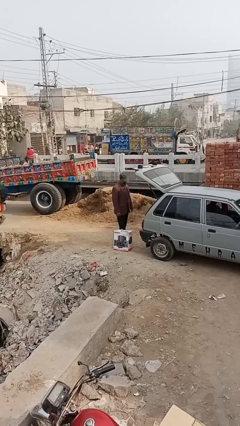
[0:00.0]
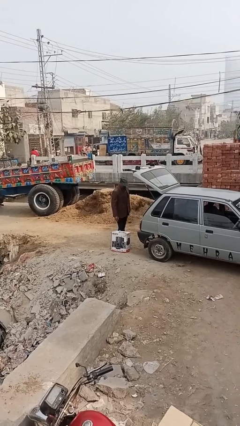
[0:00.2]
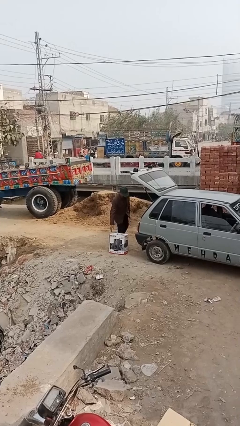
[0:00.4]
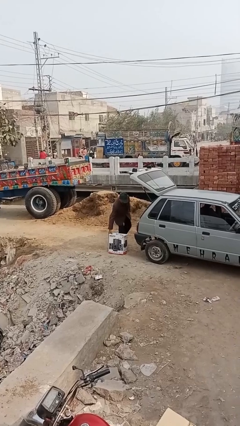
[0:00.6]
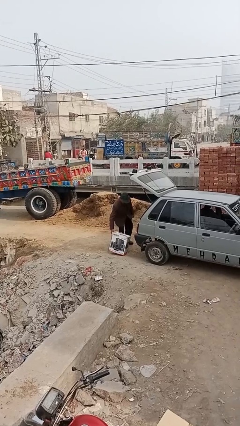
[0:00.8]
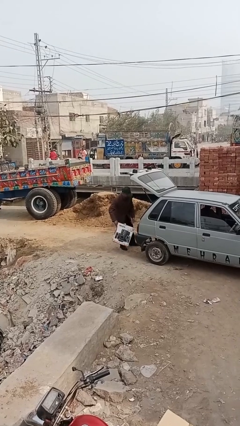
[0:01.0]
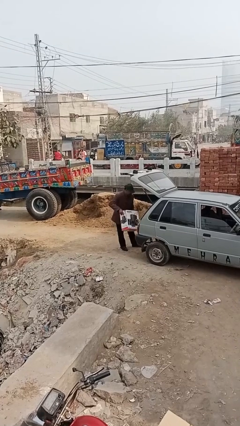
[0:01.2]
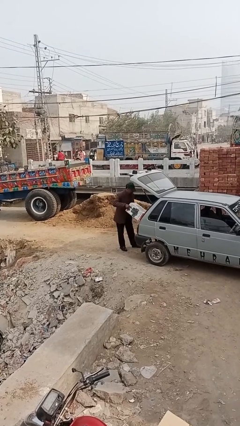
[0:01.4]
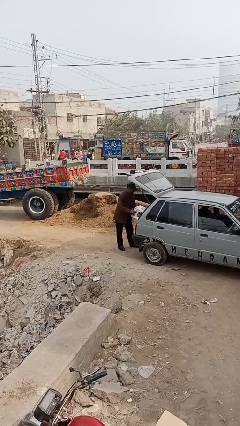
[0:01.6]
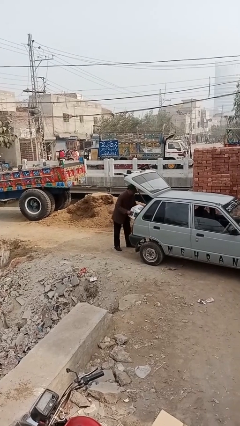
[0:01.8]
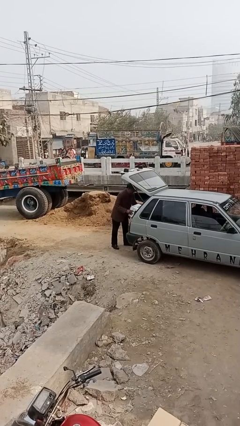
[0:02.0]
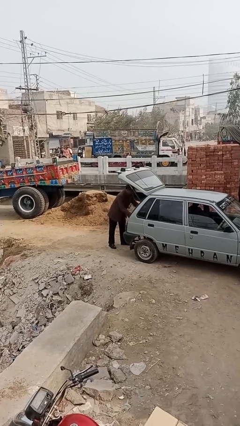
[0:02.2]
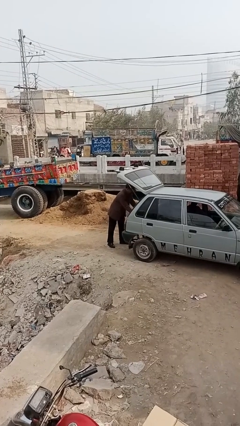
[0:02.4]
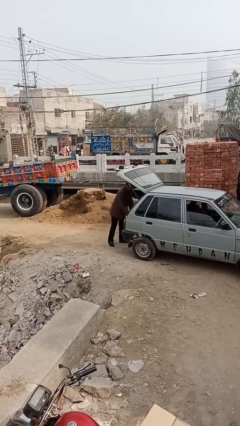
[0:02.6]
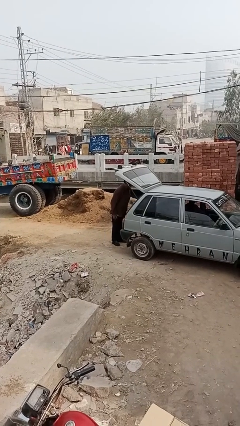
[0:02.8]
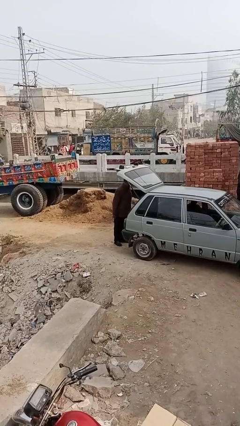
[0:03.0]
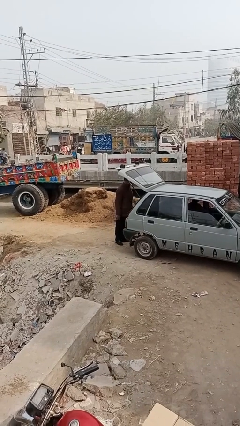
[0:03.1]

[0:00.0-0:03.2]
person loads car

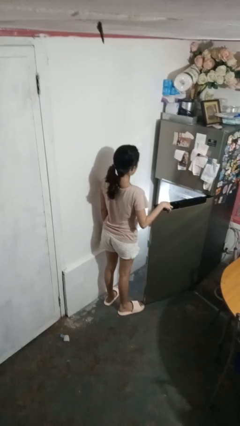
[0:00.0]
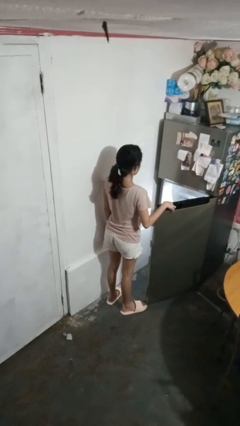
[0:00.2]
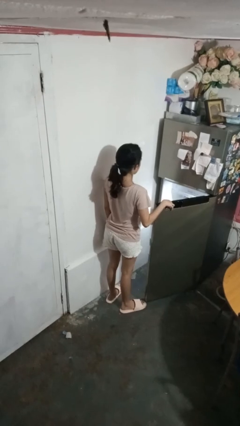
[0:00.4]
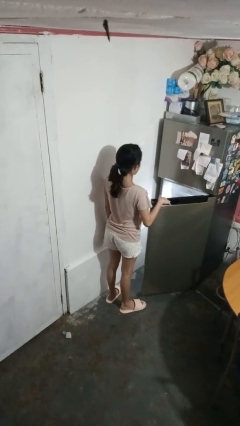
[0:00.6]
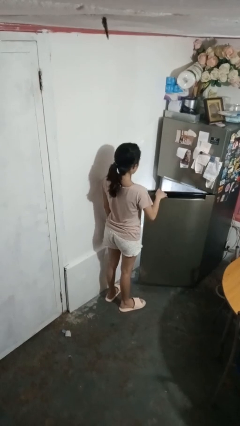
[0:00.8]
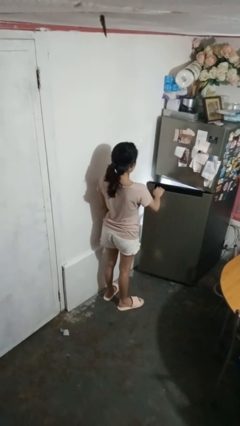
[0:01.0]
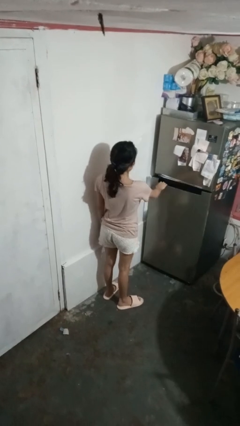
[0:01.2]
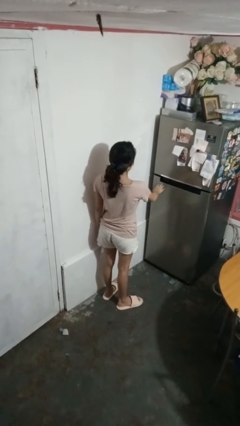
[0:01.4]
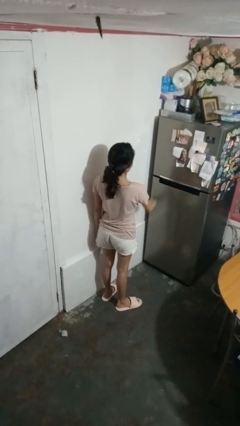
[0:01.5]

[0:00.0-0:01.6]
person closes refrigerator

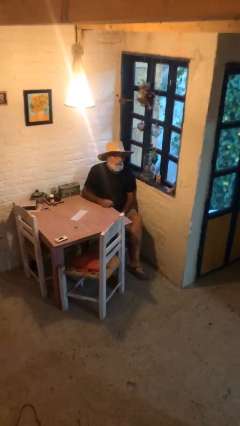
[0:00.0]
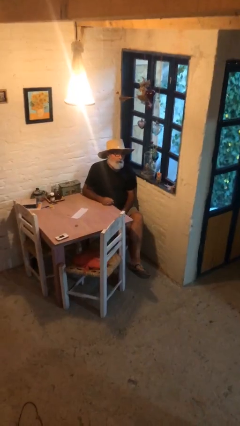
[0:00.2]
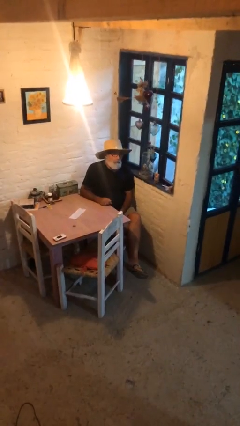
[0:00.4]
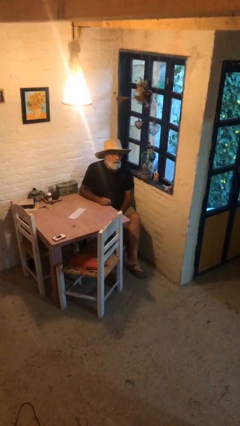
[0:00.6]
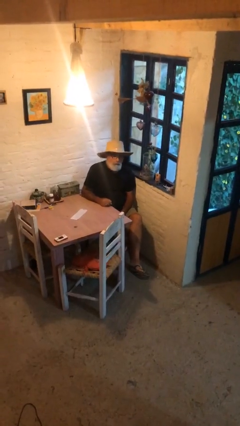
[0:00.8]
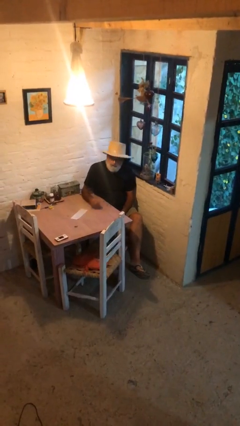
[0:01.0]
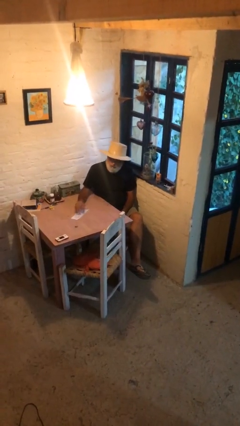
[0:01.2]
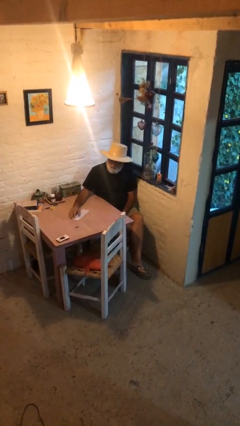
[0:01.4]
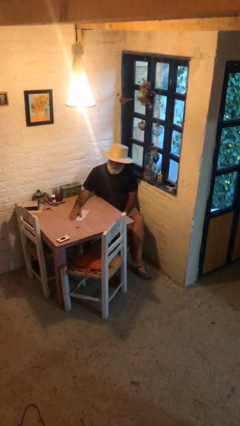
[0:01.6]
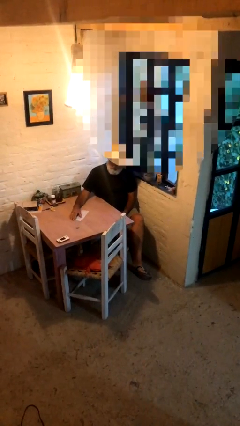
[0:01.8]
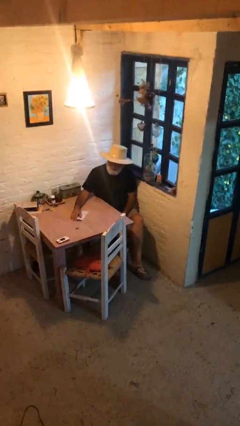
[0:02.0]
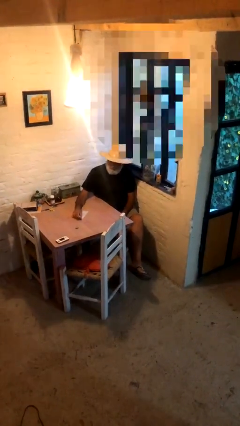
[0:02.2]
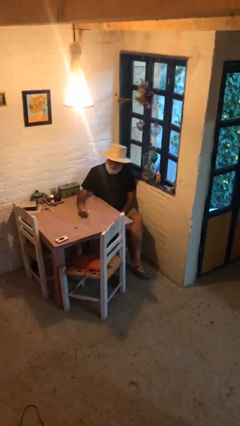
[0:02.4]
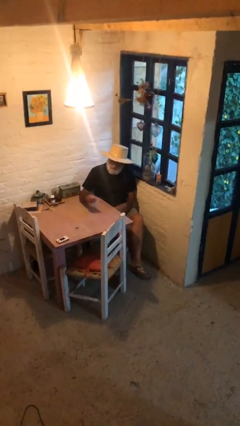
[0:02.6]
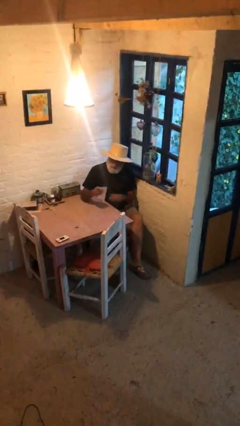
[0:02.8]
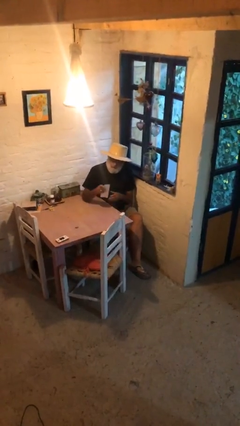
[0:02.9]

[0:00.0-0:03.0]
person picks up object from table

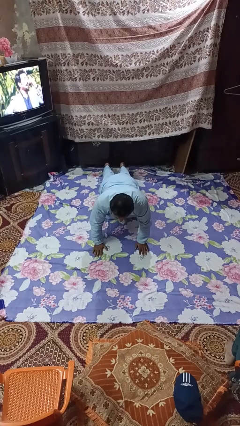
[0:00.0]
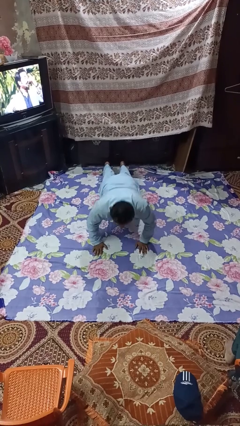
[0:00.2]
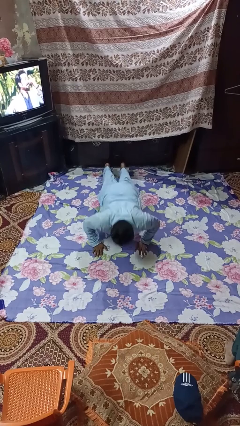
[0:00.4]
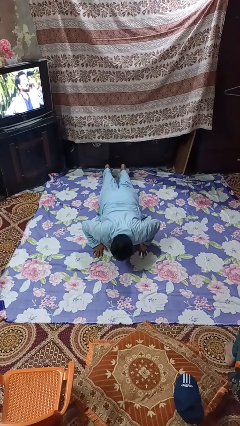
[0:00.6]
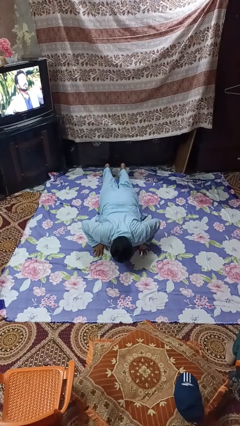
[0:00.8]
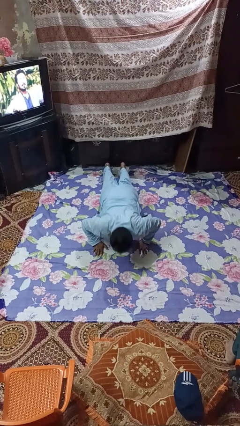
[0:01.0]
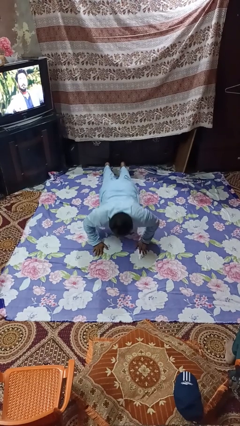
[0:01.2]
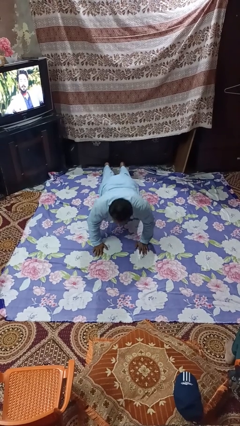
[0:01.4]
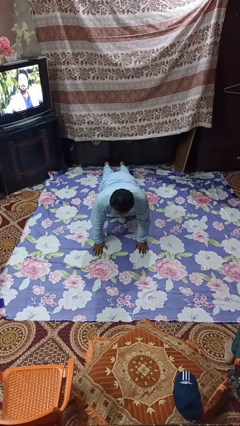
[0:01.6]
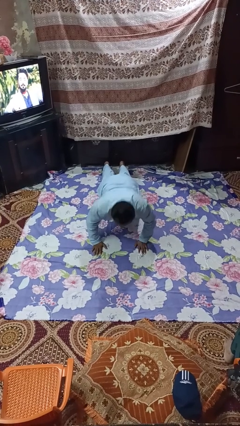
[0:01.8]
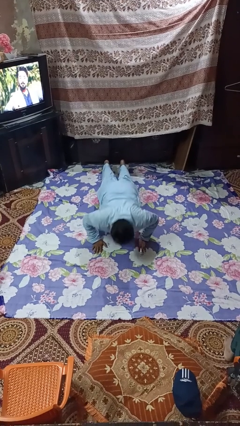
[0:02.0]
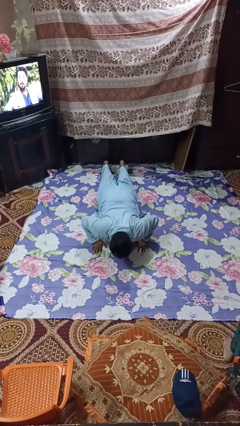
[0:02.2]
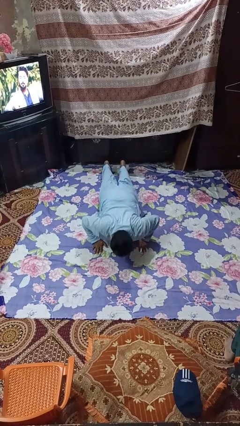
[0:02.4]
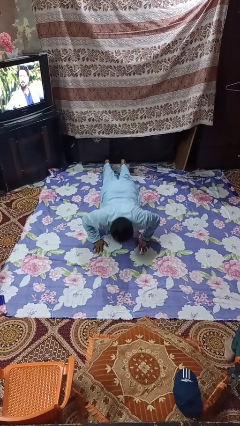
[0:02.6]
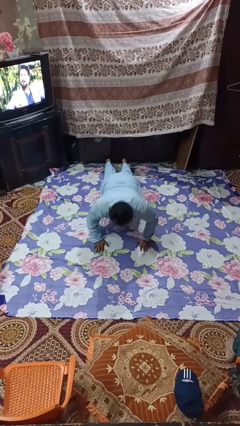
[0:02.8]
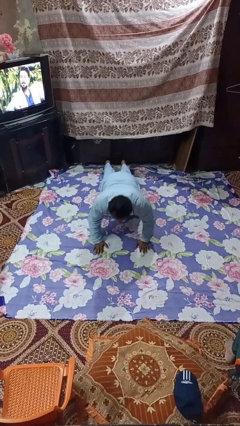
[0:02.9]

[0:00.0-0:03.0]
person exercises with pushup

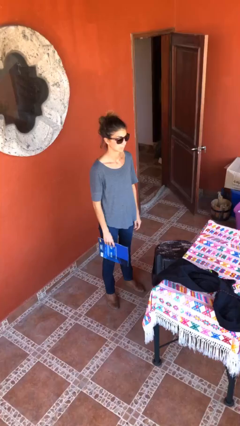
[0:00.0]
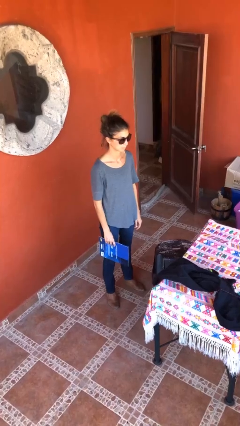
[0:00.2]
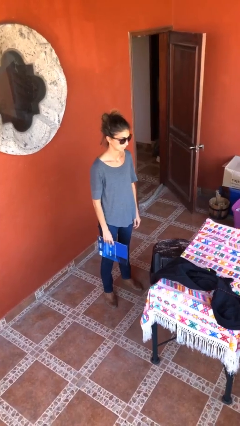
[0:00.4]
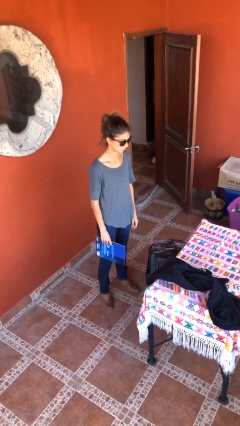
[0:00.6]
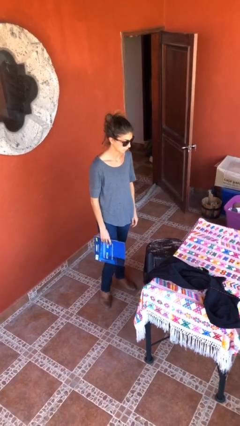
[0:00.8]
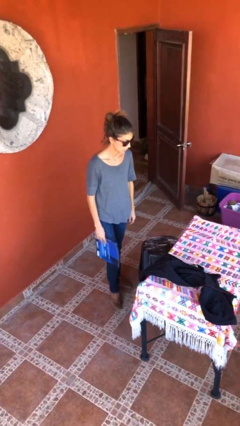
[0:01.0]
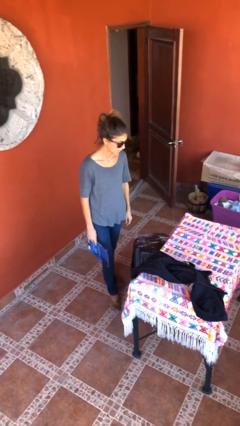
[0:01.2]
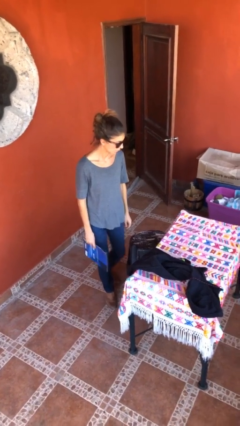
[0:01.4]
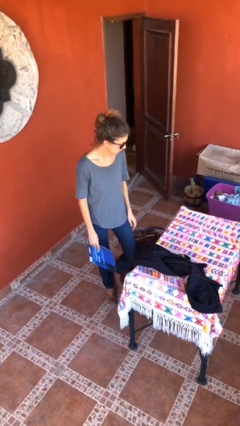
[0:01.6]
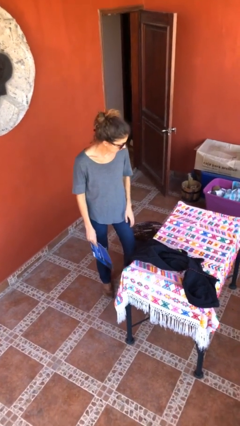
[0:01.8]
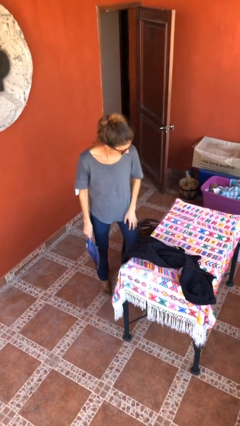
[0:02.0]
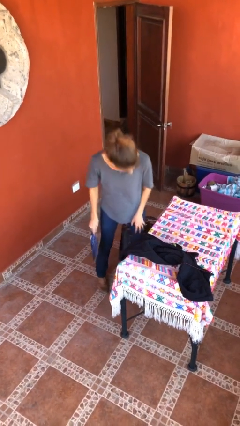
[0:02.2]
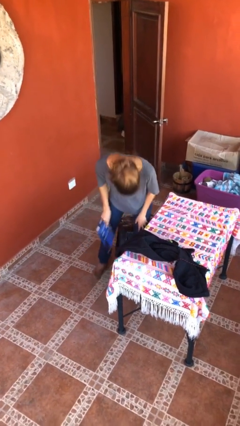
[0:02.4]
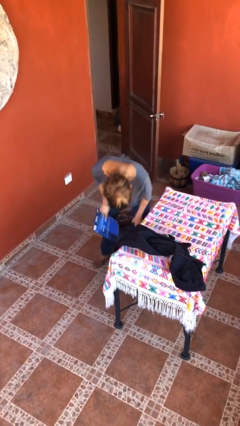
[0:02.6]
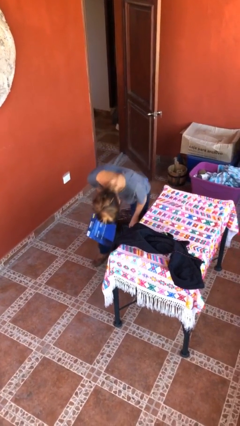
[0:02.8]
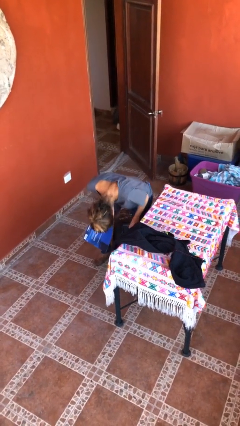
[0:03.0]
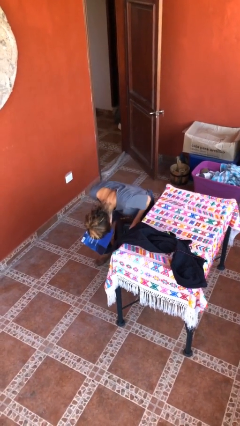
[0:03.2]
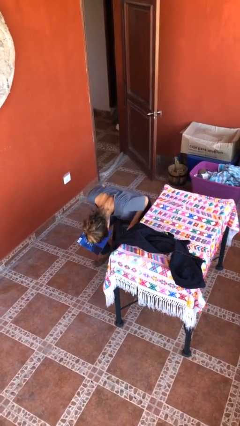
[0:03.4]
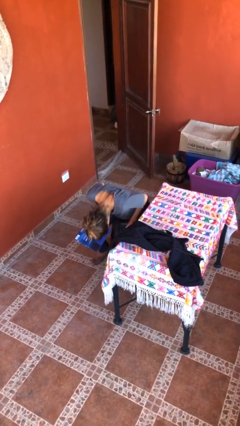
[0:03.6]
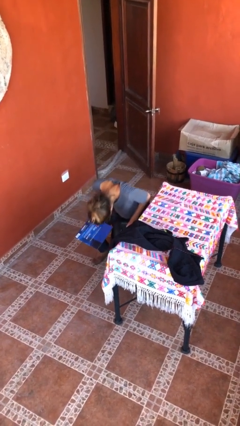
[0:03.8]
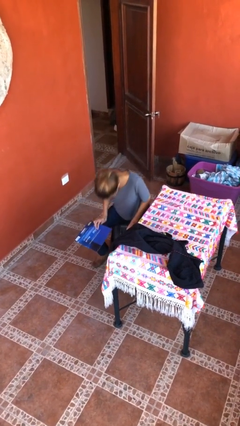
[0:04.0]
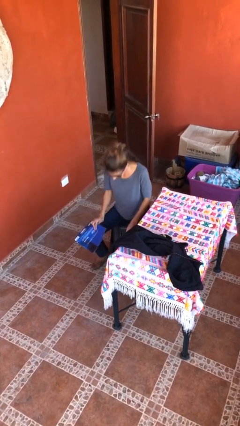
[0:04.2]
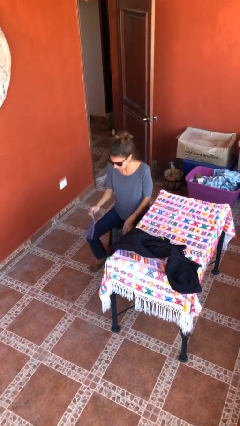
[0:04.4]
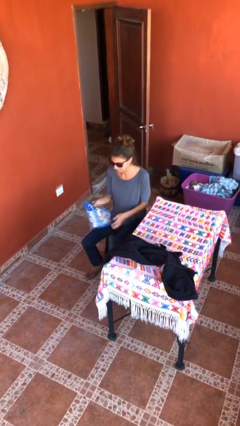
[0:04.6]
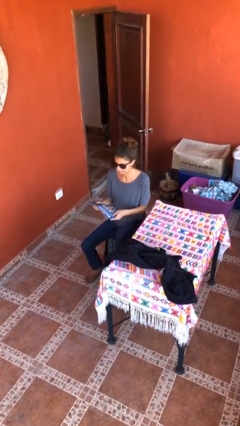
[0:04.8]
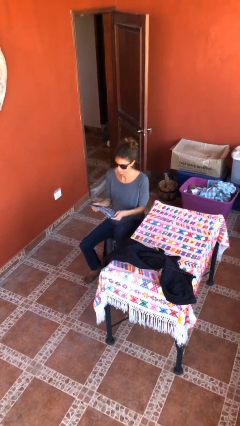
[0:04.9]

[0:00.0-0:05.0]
person sits down

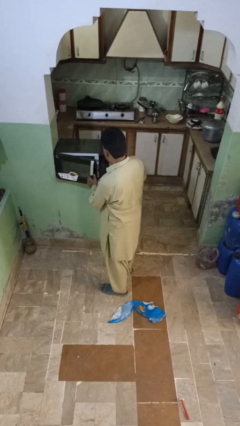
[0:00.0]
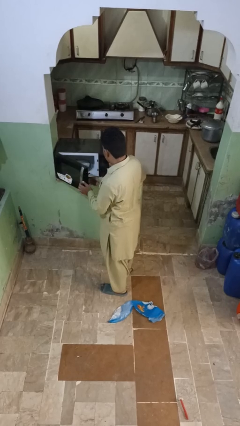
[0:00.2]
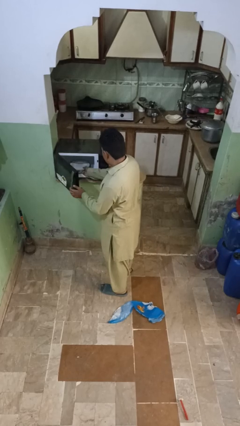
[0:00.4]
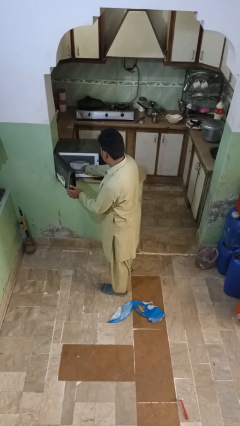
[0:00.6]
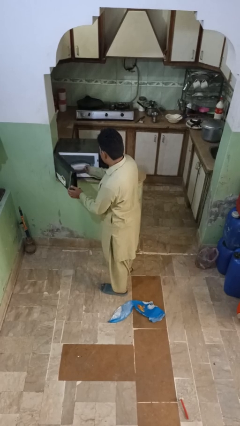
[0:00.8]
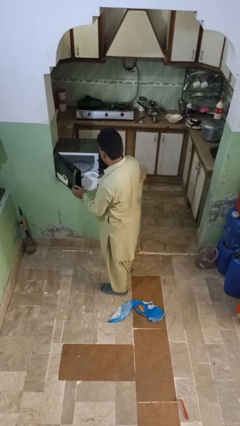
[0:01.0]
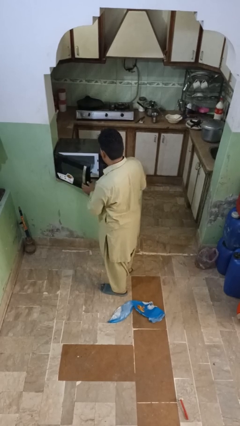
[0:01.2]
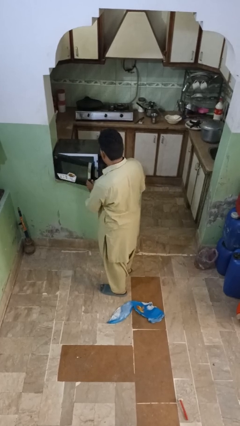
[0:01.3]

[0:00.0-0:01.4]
person takes object from microwave

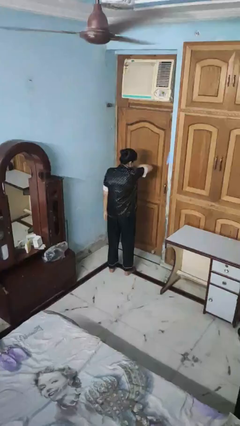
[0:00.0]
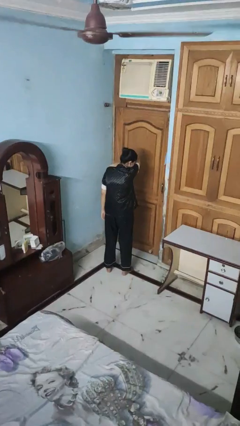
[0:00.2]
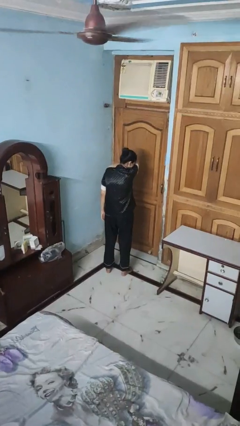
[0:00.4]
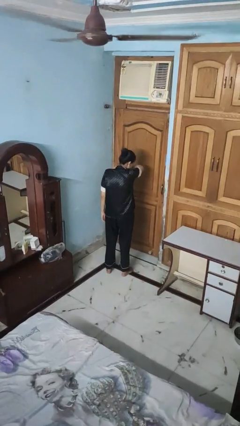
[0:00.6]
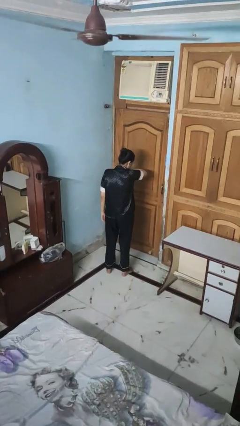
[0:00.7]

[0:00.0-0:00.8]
person sneezes into arm
